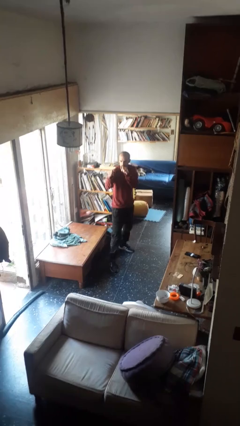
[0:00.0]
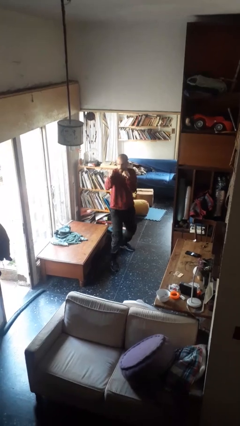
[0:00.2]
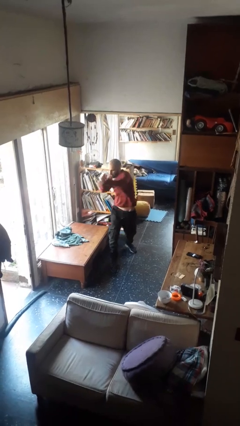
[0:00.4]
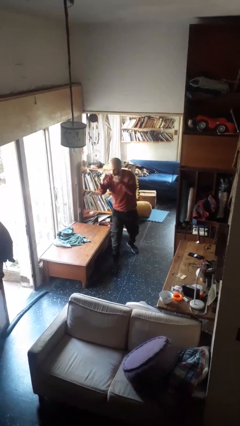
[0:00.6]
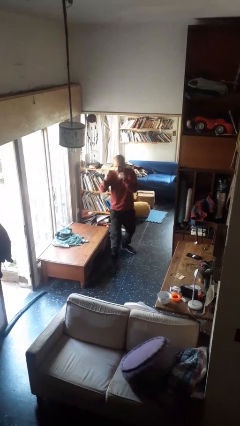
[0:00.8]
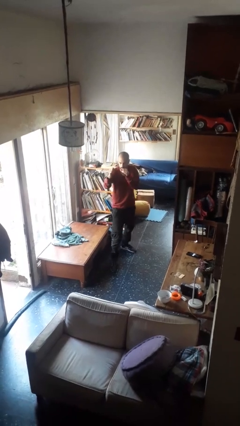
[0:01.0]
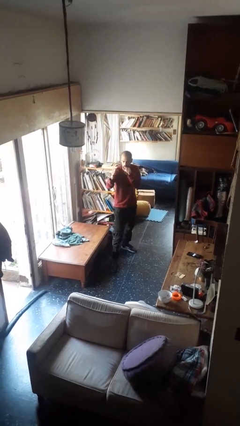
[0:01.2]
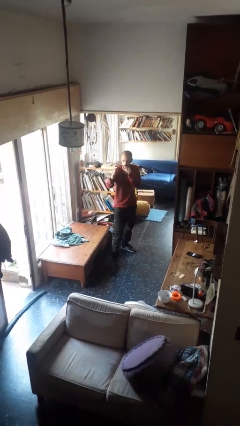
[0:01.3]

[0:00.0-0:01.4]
person punches

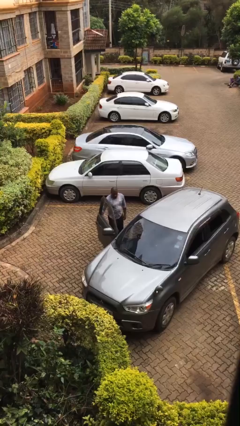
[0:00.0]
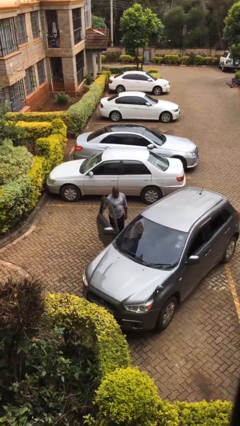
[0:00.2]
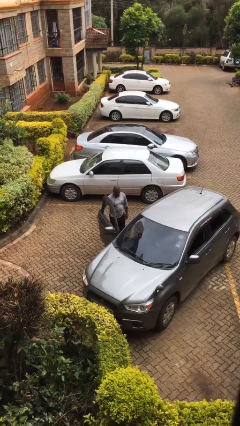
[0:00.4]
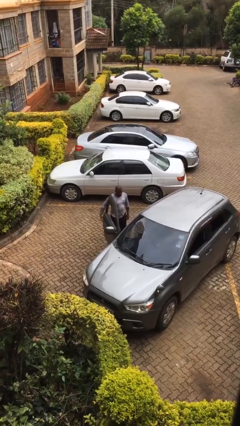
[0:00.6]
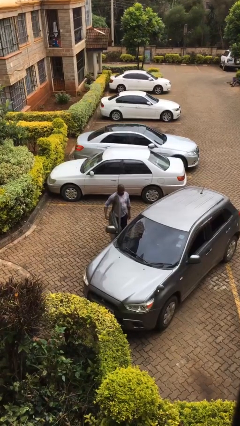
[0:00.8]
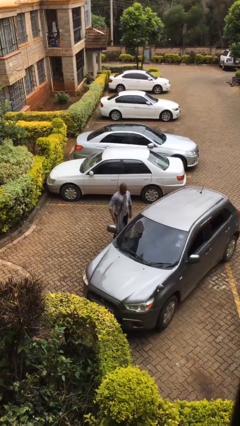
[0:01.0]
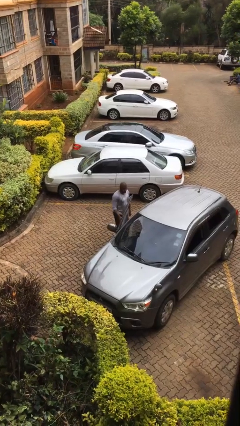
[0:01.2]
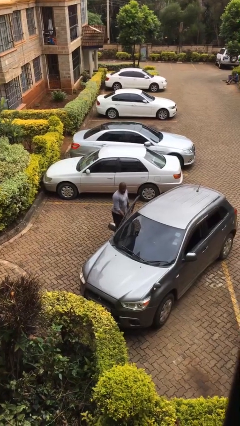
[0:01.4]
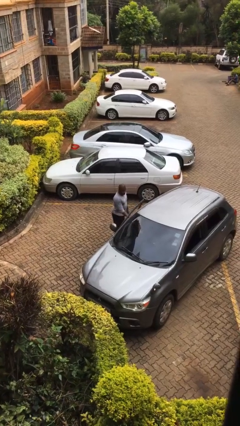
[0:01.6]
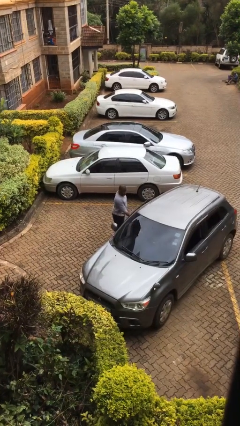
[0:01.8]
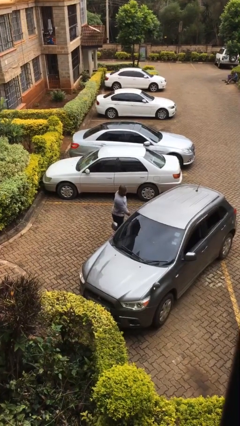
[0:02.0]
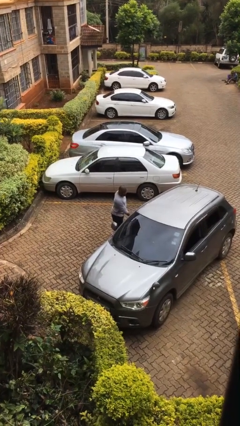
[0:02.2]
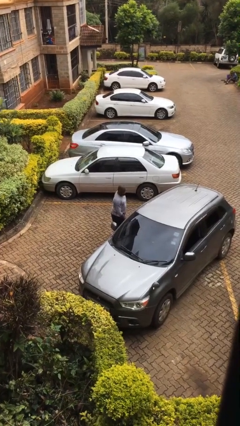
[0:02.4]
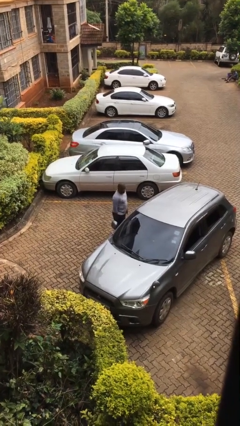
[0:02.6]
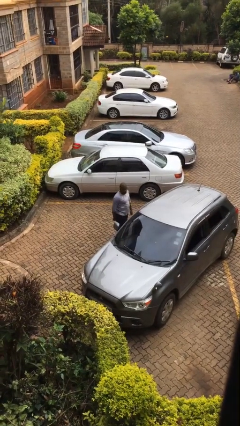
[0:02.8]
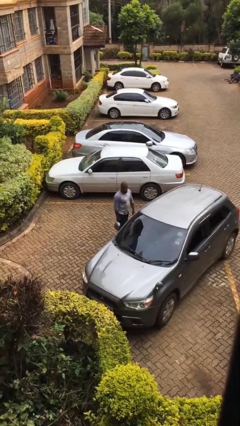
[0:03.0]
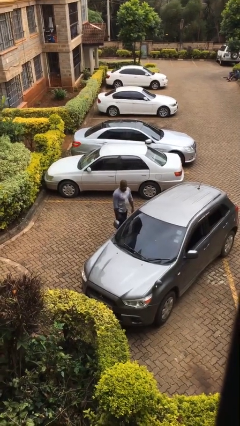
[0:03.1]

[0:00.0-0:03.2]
person closes car door

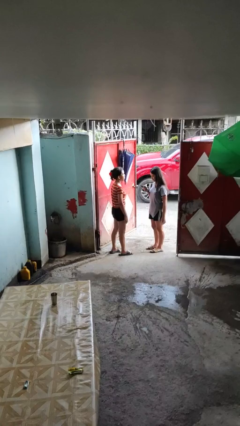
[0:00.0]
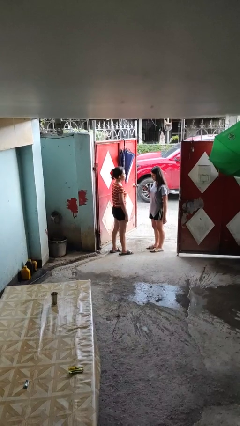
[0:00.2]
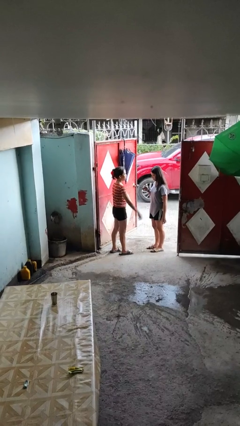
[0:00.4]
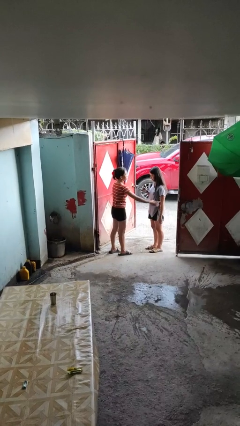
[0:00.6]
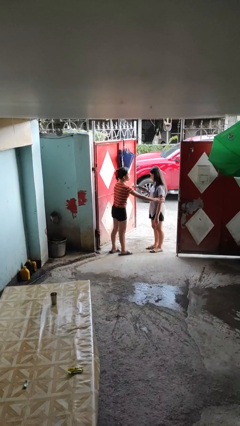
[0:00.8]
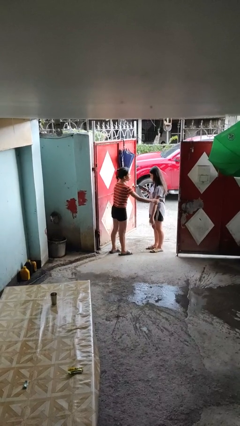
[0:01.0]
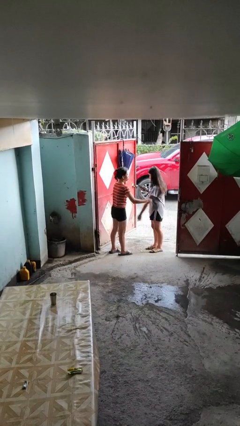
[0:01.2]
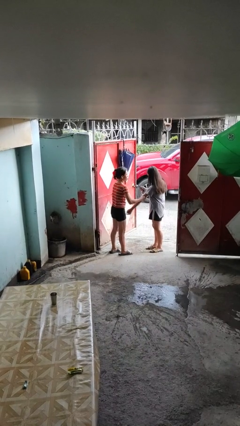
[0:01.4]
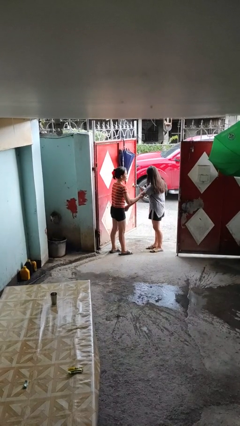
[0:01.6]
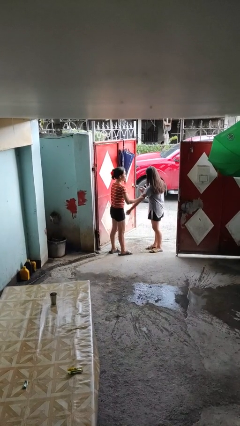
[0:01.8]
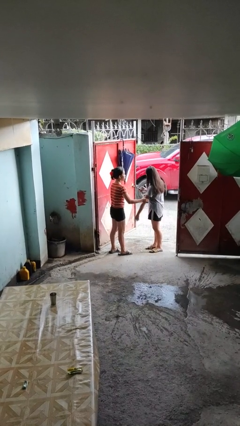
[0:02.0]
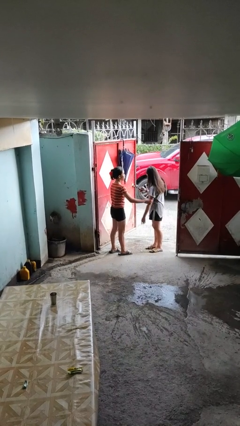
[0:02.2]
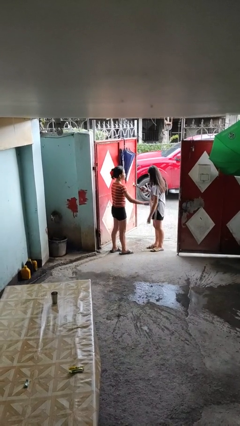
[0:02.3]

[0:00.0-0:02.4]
person grabs person by bicep

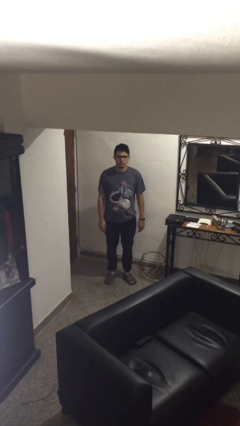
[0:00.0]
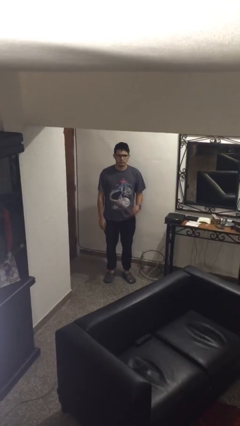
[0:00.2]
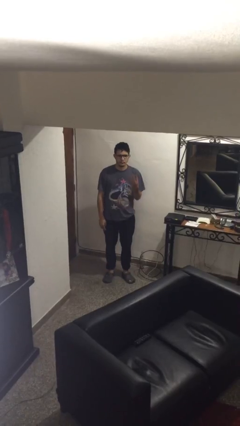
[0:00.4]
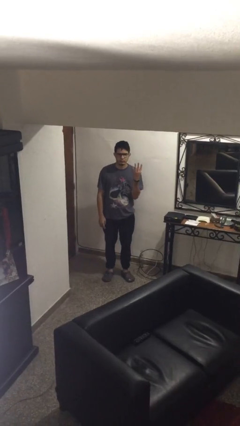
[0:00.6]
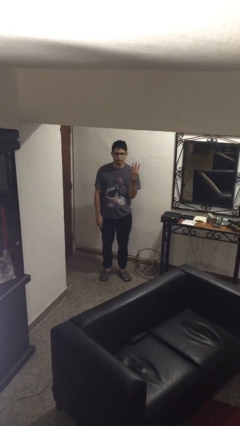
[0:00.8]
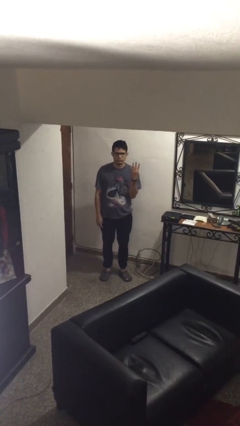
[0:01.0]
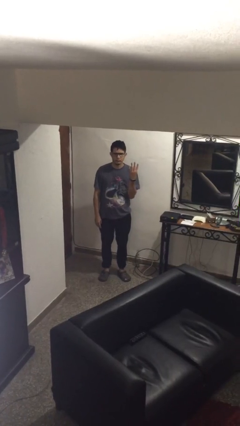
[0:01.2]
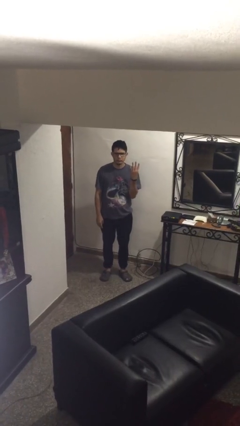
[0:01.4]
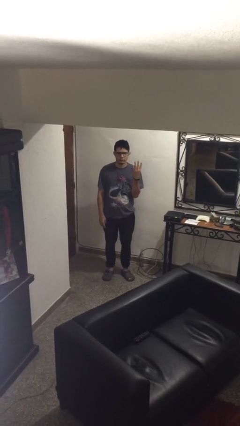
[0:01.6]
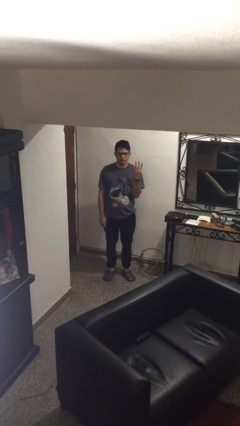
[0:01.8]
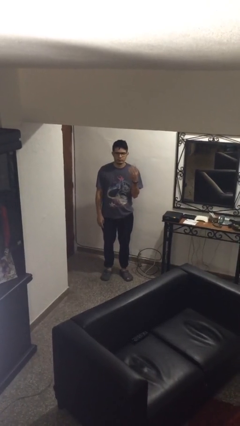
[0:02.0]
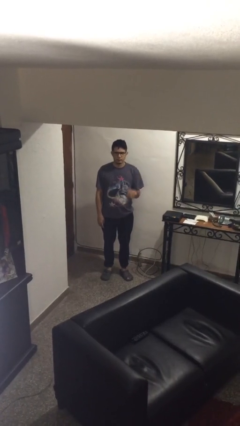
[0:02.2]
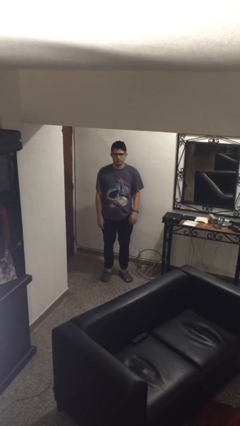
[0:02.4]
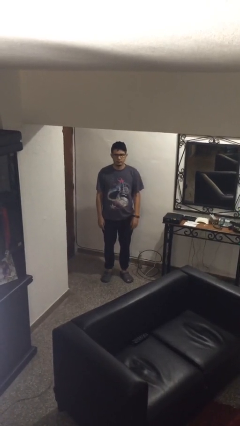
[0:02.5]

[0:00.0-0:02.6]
person gestures number four

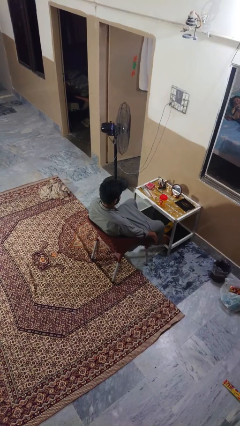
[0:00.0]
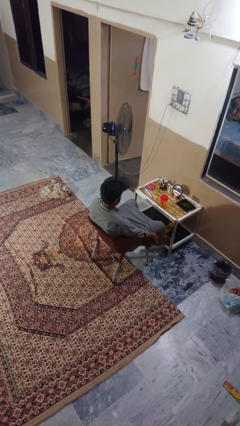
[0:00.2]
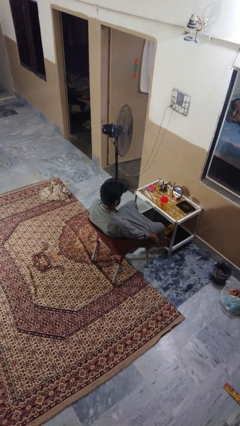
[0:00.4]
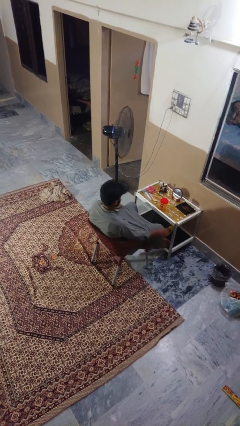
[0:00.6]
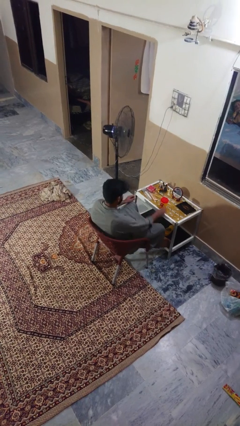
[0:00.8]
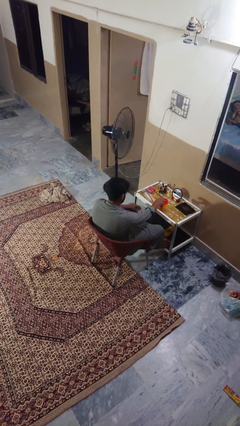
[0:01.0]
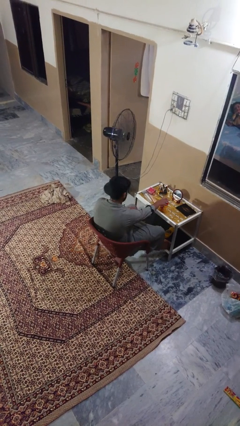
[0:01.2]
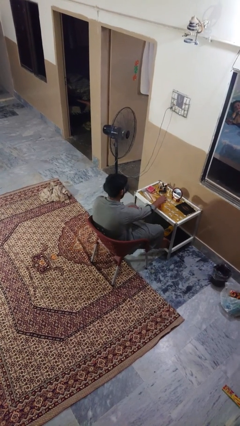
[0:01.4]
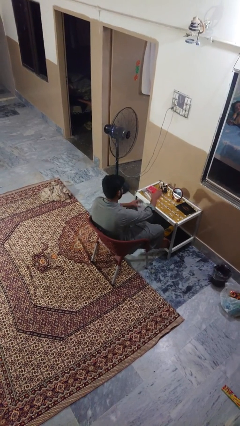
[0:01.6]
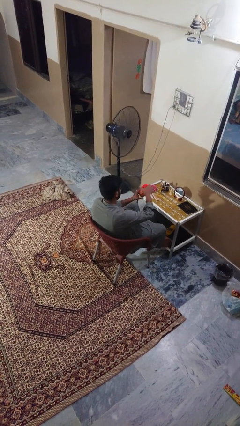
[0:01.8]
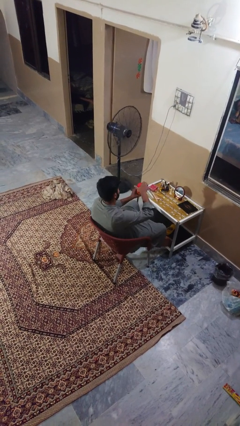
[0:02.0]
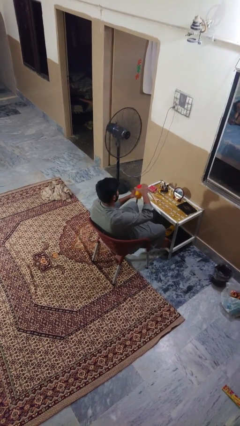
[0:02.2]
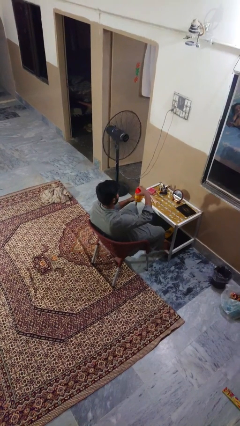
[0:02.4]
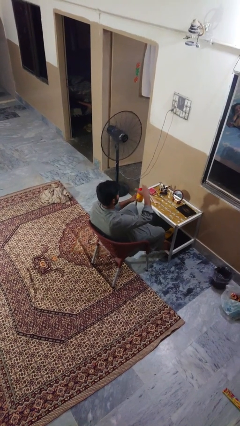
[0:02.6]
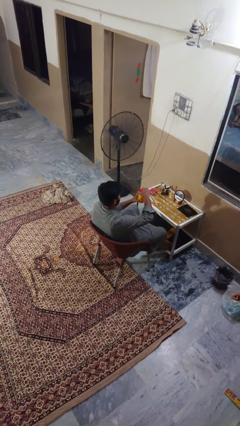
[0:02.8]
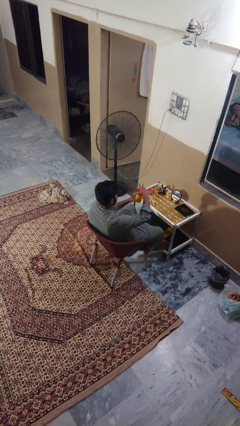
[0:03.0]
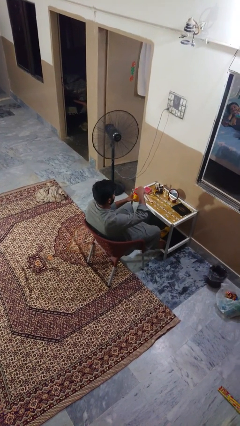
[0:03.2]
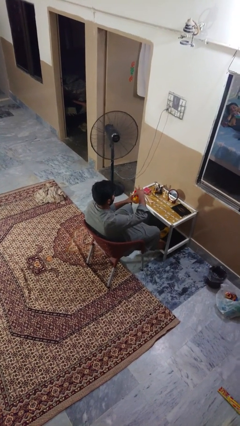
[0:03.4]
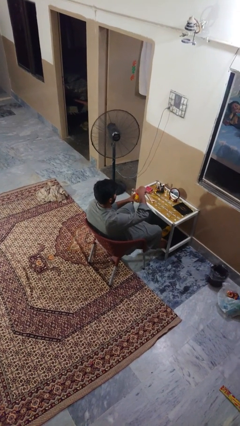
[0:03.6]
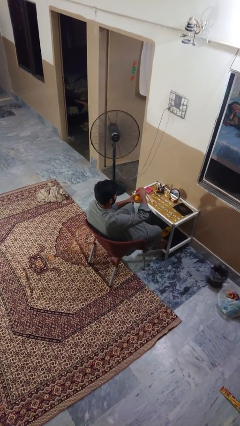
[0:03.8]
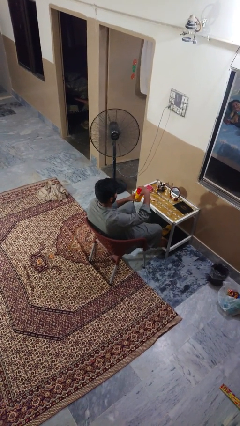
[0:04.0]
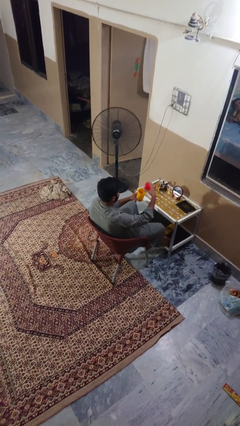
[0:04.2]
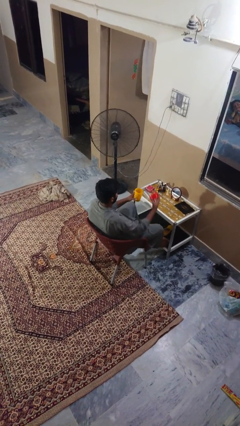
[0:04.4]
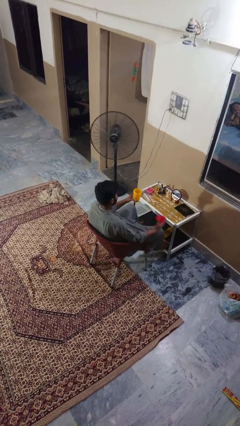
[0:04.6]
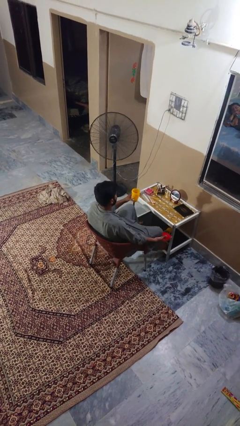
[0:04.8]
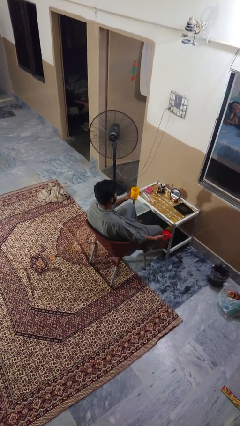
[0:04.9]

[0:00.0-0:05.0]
person opens jar

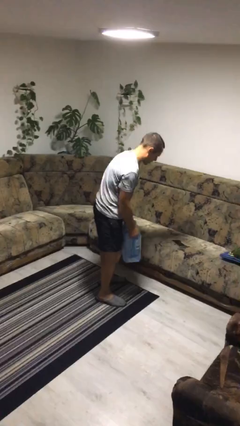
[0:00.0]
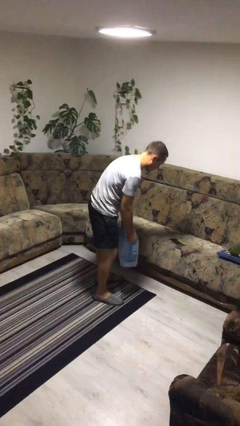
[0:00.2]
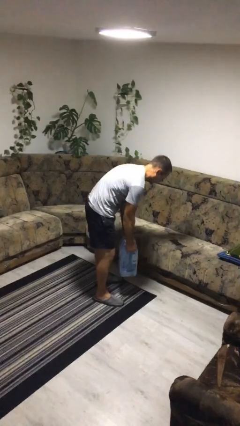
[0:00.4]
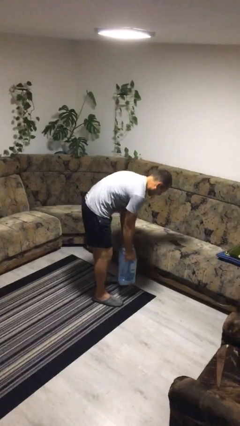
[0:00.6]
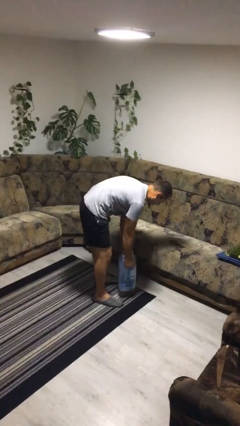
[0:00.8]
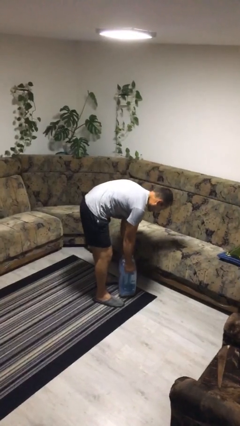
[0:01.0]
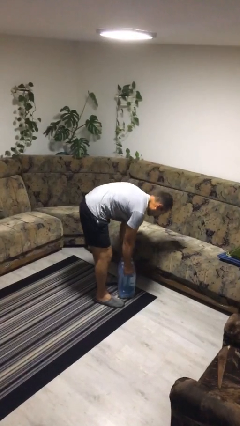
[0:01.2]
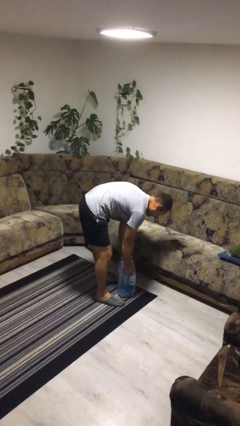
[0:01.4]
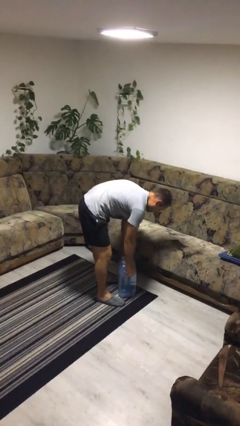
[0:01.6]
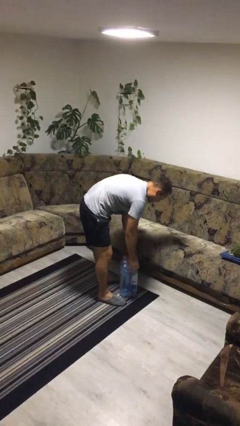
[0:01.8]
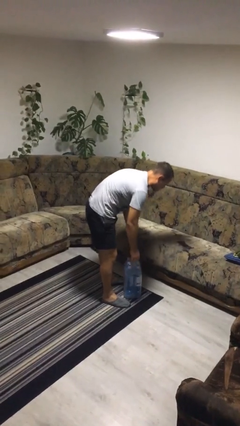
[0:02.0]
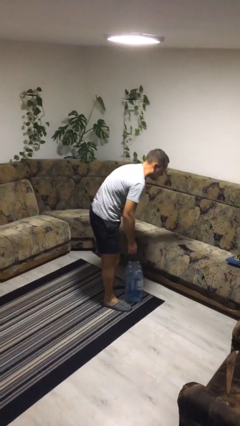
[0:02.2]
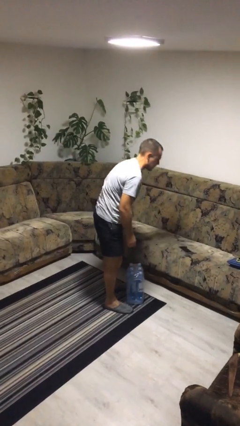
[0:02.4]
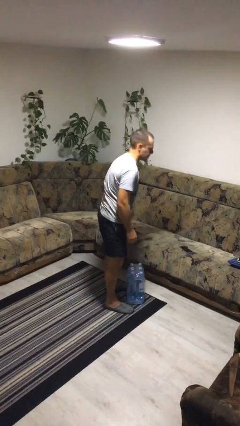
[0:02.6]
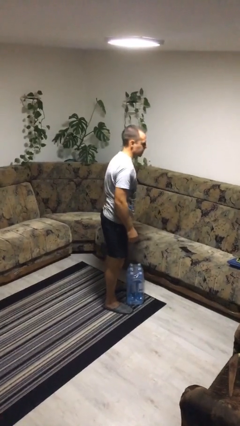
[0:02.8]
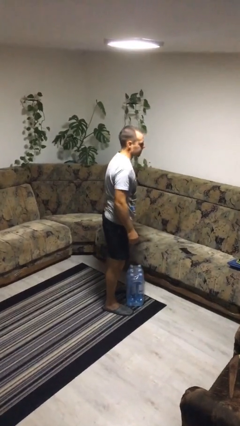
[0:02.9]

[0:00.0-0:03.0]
person puts down object on floor
